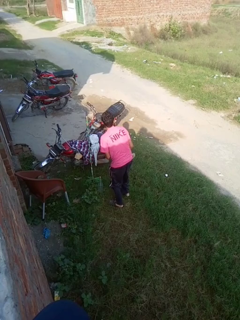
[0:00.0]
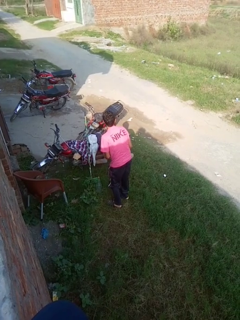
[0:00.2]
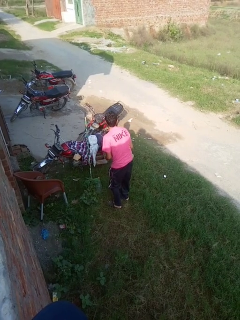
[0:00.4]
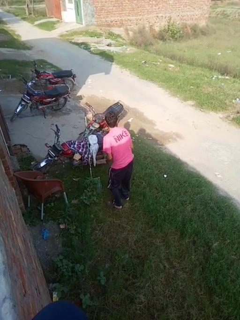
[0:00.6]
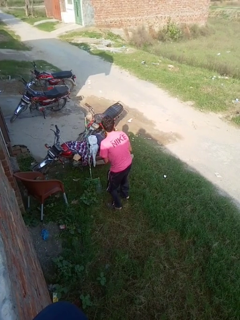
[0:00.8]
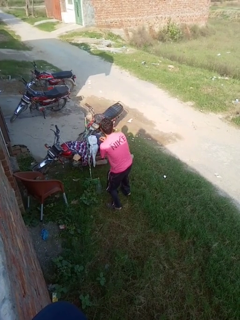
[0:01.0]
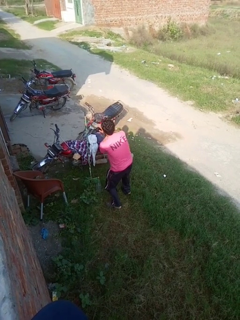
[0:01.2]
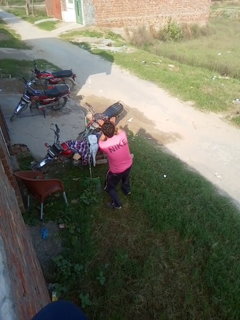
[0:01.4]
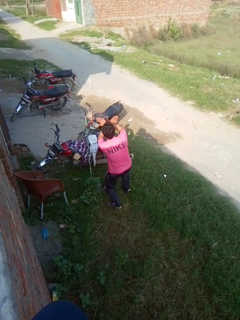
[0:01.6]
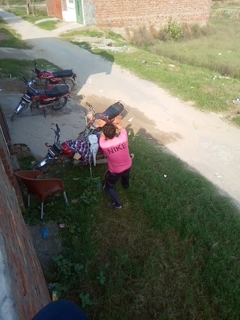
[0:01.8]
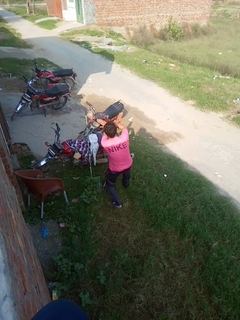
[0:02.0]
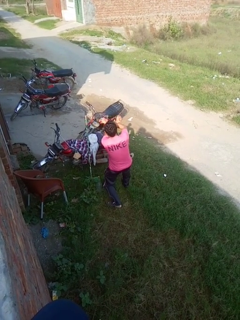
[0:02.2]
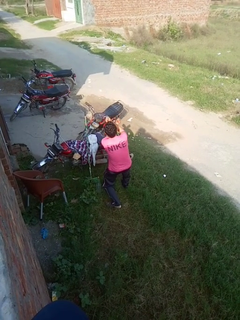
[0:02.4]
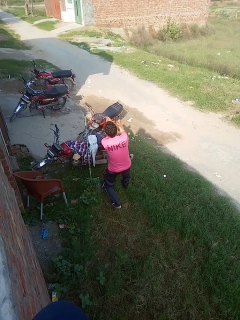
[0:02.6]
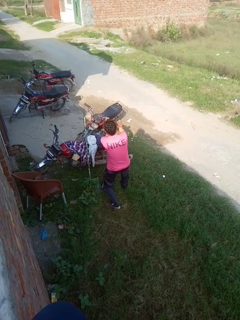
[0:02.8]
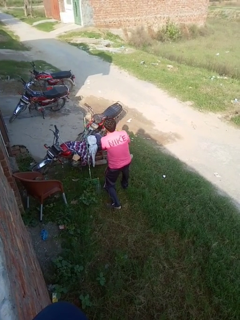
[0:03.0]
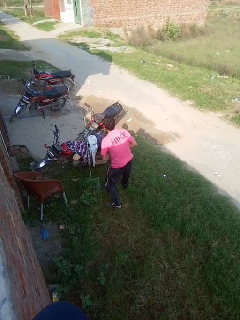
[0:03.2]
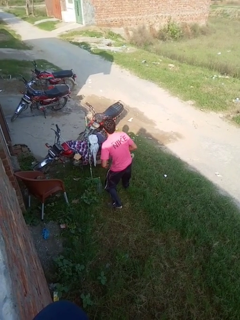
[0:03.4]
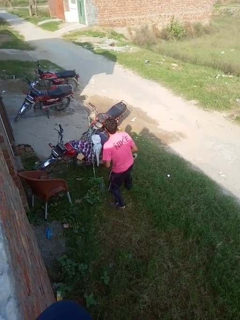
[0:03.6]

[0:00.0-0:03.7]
person karate chop

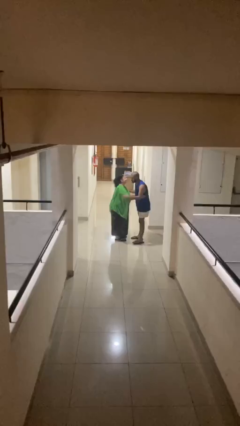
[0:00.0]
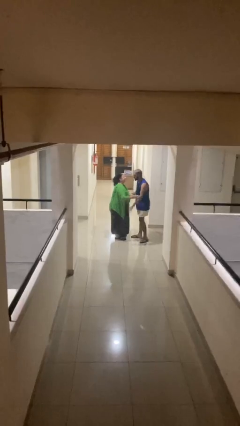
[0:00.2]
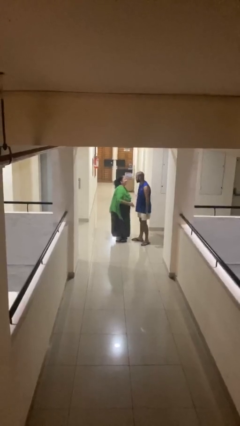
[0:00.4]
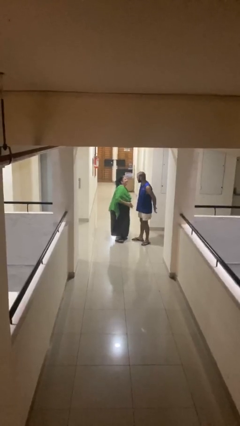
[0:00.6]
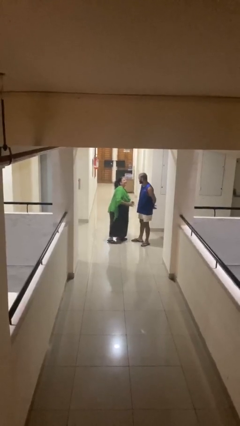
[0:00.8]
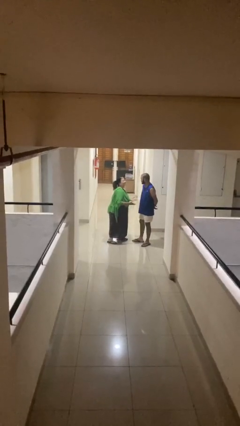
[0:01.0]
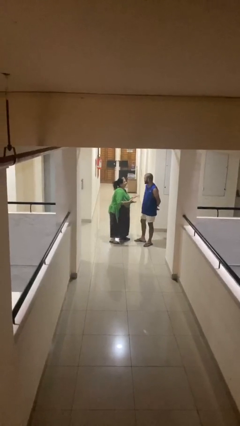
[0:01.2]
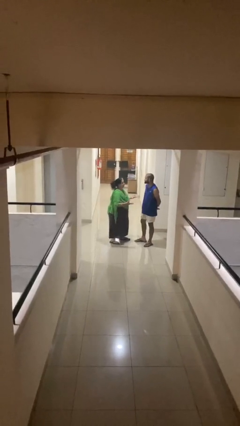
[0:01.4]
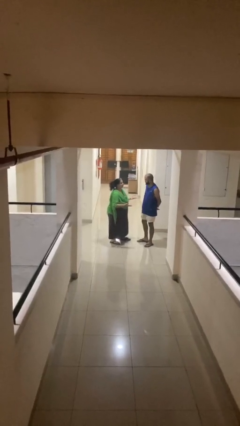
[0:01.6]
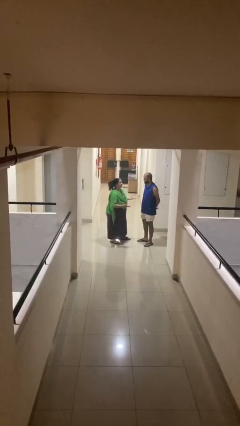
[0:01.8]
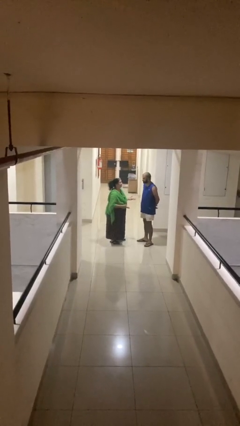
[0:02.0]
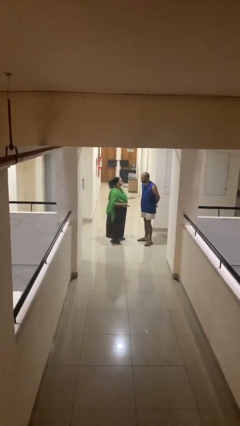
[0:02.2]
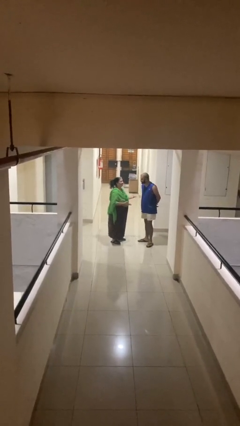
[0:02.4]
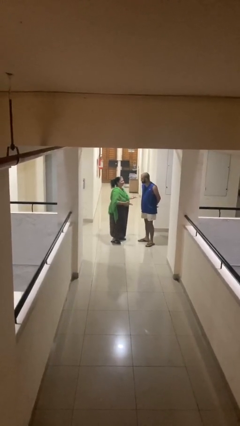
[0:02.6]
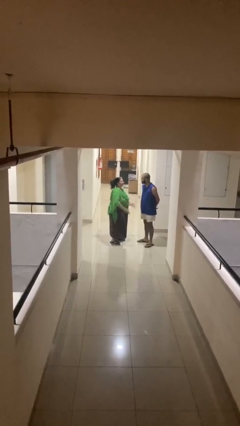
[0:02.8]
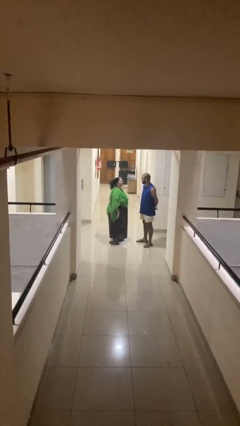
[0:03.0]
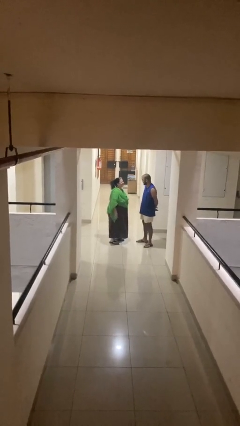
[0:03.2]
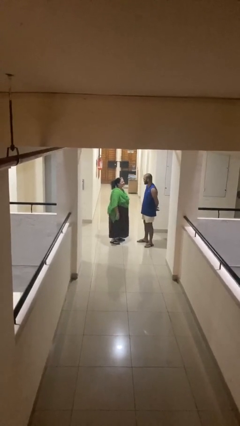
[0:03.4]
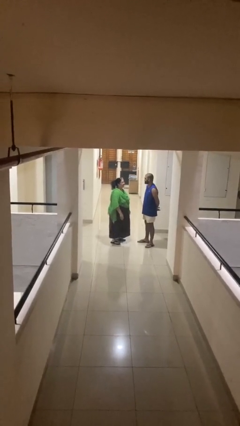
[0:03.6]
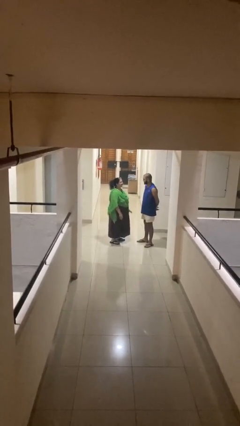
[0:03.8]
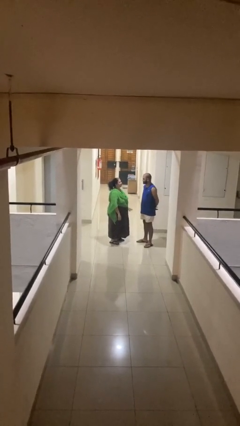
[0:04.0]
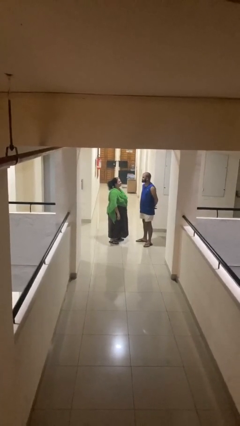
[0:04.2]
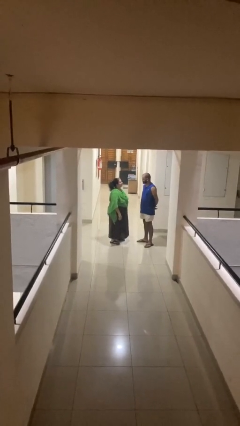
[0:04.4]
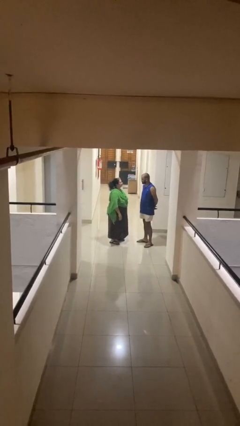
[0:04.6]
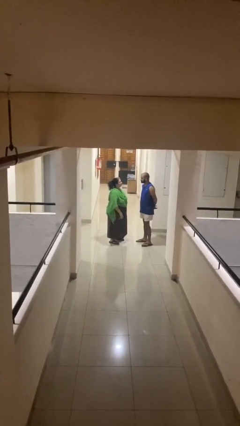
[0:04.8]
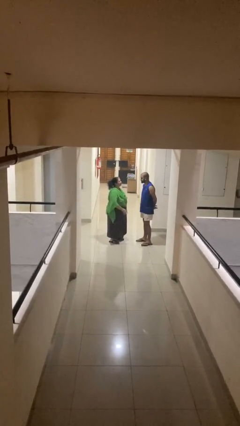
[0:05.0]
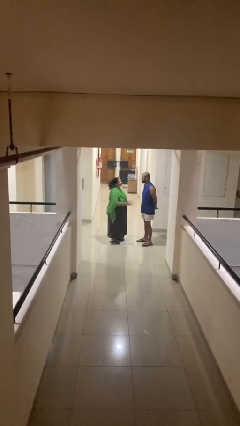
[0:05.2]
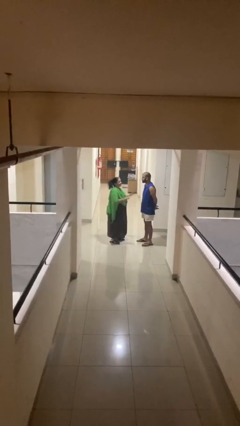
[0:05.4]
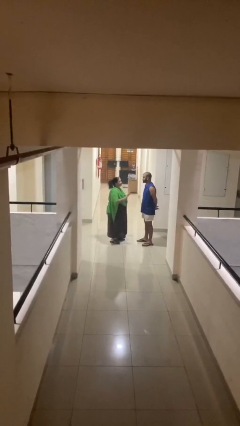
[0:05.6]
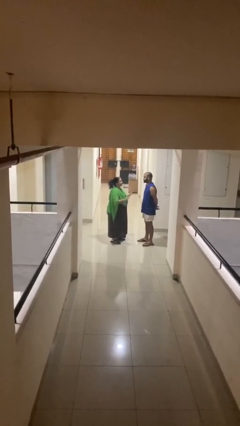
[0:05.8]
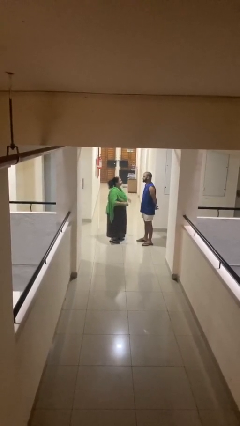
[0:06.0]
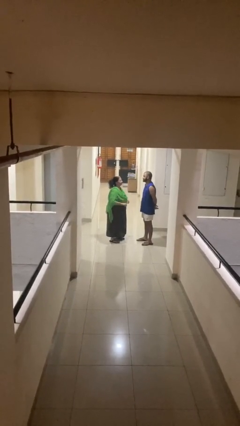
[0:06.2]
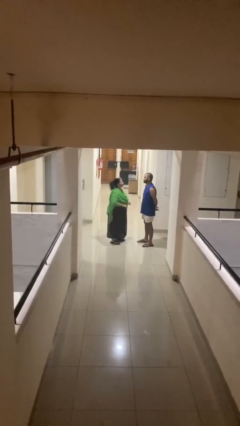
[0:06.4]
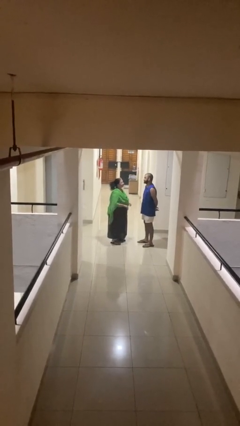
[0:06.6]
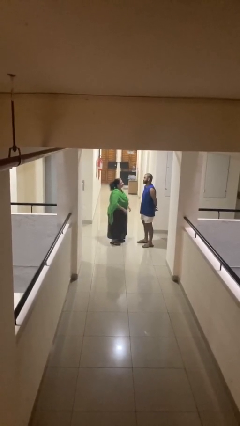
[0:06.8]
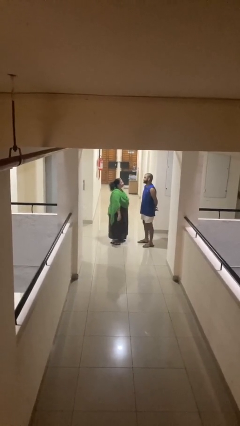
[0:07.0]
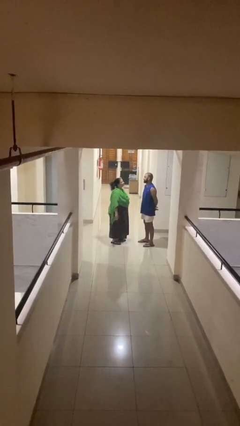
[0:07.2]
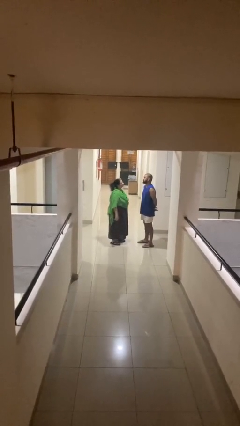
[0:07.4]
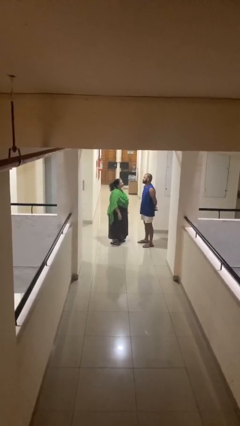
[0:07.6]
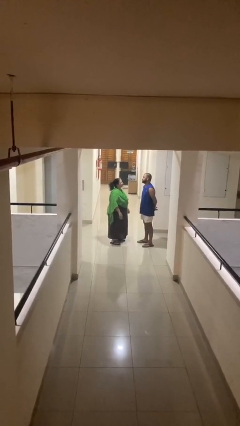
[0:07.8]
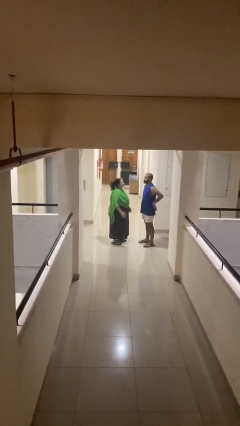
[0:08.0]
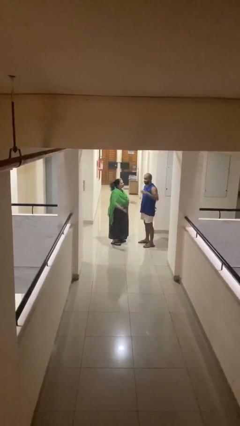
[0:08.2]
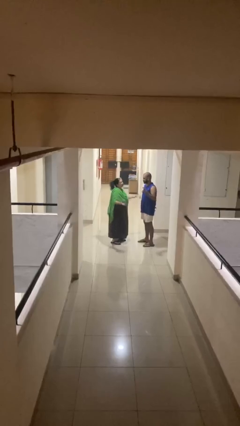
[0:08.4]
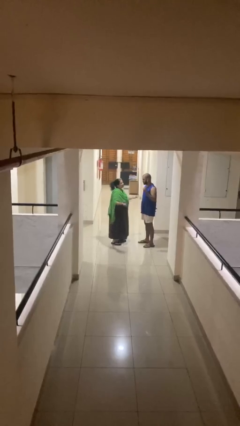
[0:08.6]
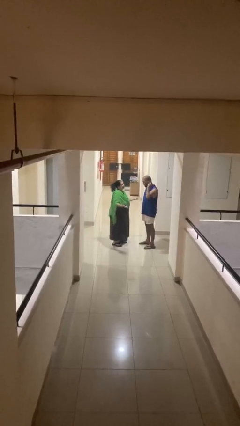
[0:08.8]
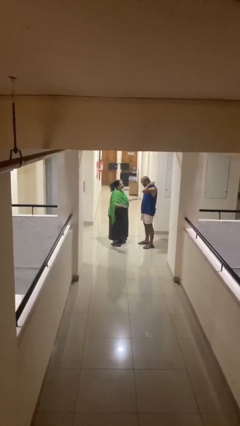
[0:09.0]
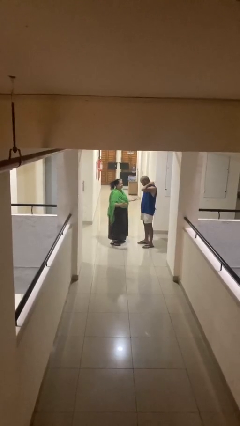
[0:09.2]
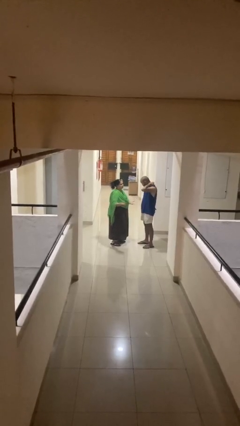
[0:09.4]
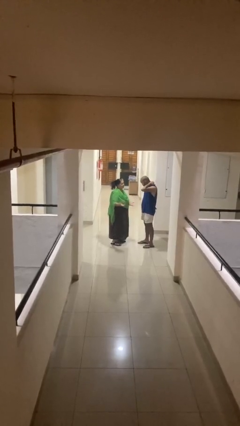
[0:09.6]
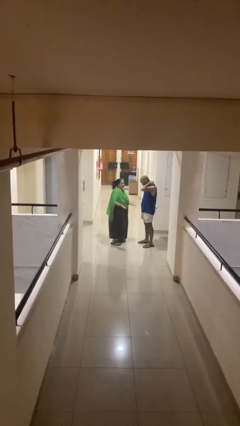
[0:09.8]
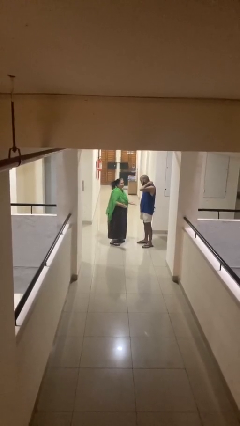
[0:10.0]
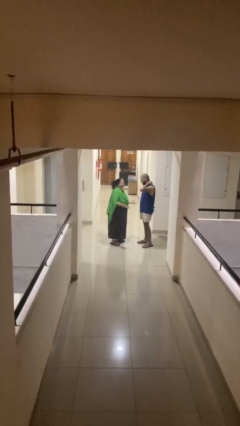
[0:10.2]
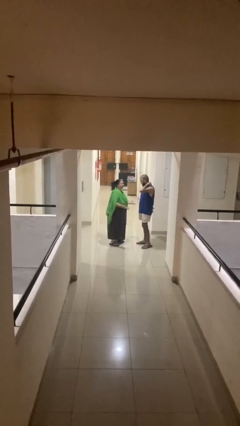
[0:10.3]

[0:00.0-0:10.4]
person talks to person

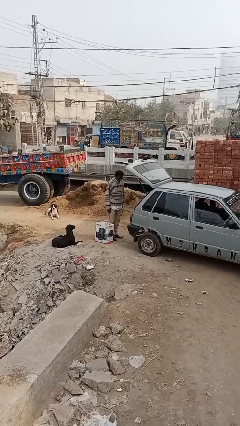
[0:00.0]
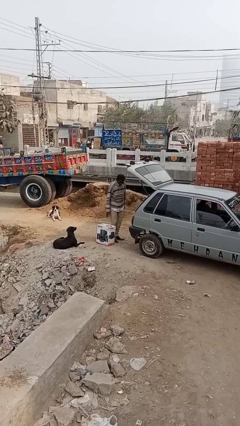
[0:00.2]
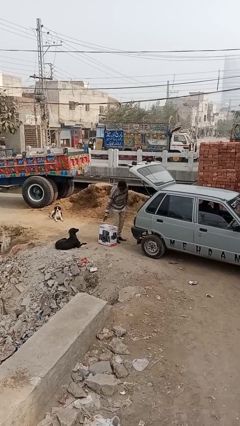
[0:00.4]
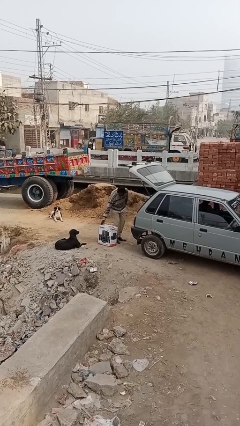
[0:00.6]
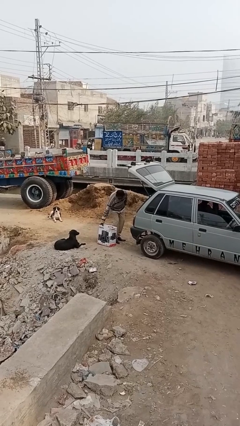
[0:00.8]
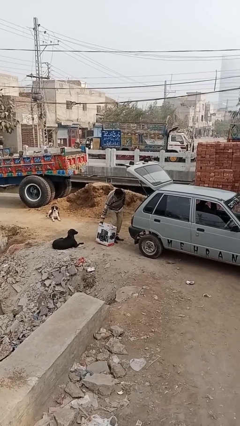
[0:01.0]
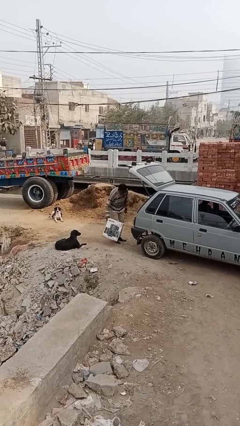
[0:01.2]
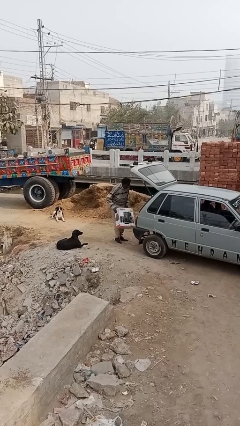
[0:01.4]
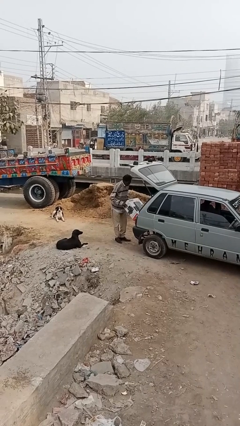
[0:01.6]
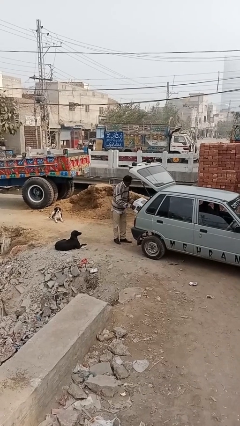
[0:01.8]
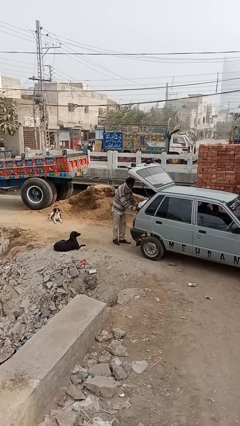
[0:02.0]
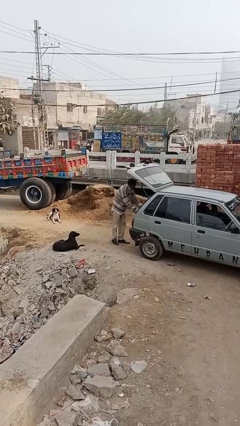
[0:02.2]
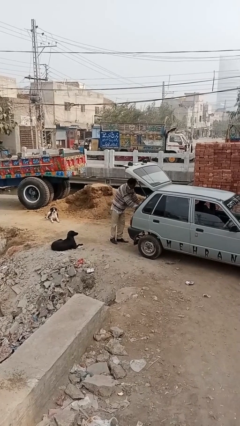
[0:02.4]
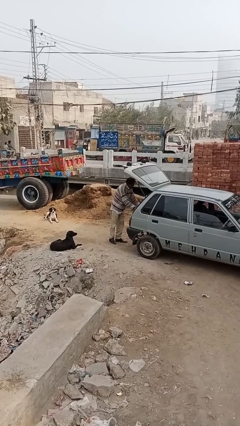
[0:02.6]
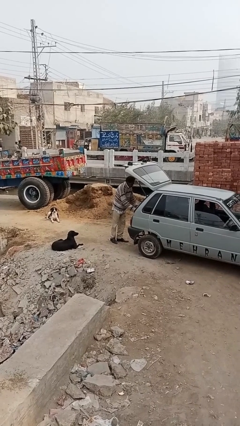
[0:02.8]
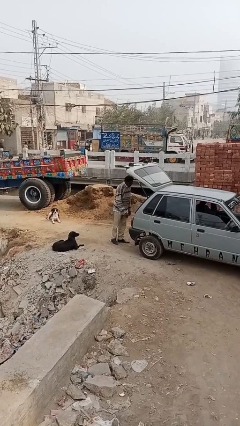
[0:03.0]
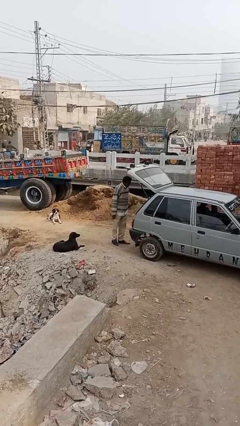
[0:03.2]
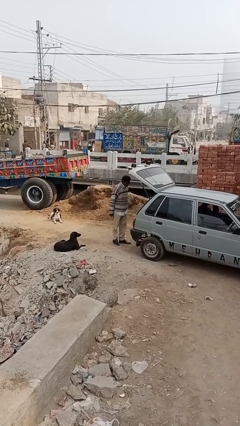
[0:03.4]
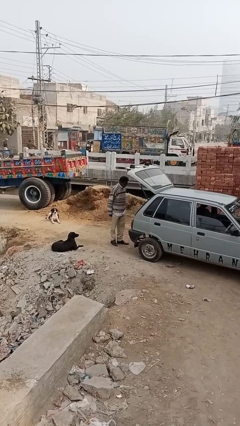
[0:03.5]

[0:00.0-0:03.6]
person loads car

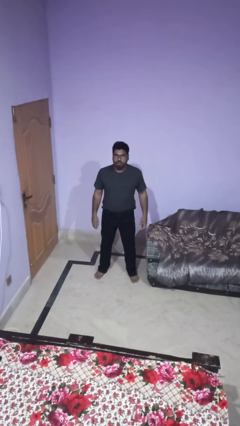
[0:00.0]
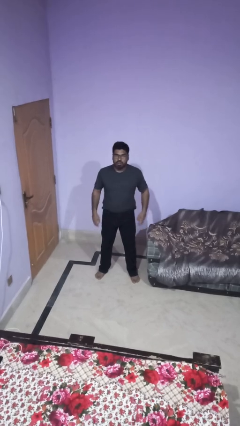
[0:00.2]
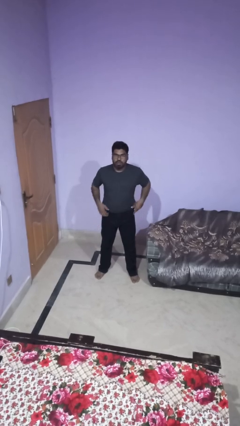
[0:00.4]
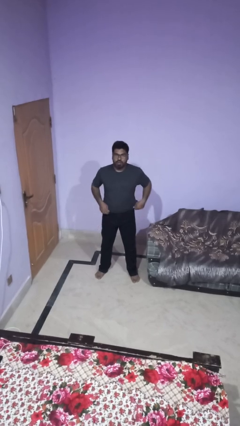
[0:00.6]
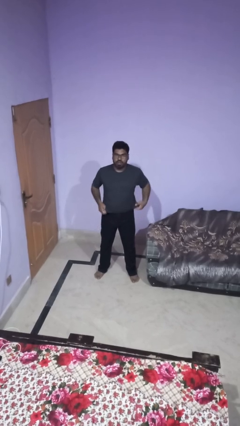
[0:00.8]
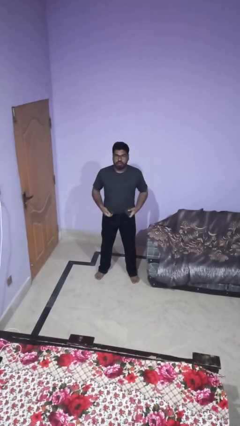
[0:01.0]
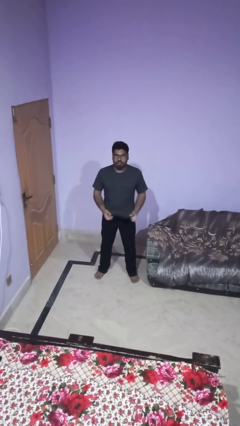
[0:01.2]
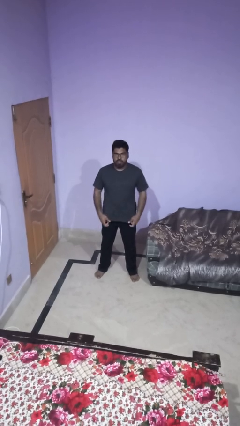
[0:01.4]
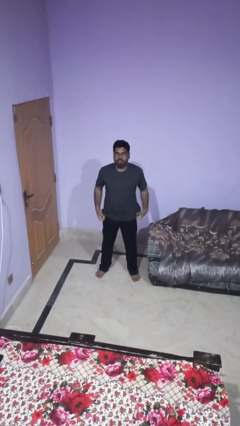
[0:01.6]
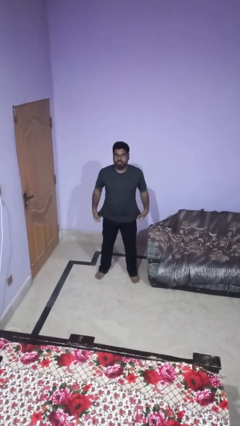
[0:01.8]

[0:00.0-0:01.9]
person untucks shirt
